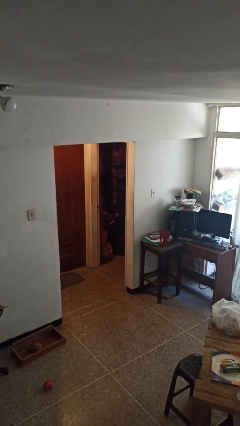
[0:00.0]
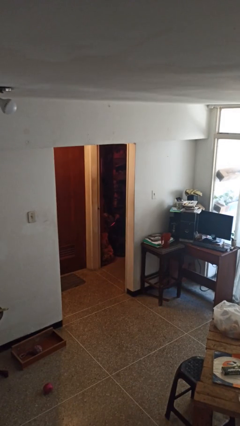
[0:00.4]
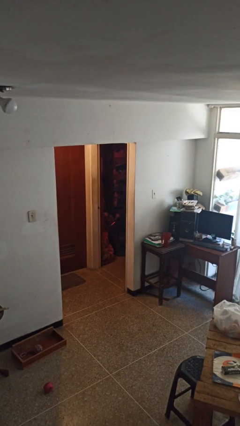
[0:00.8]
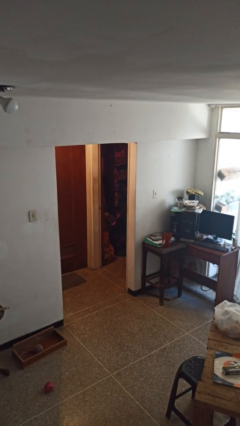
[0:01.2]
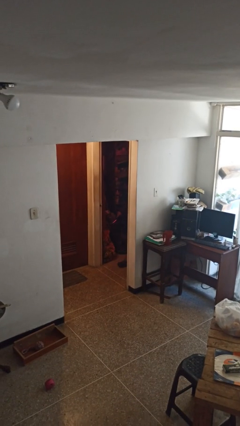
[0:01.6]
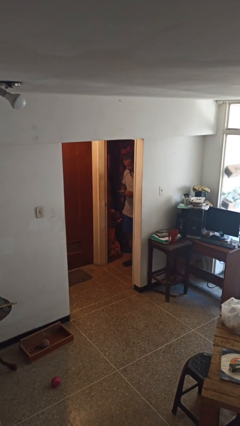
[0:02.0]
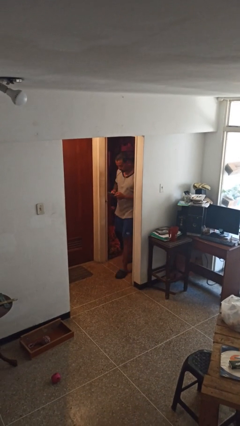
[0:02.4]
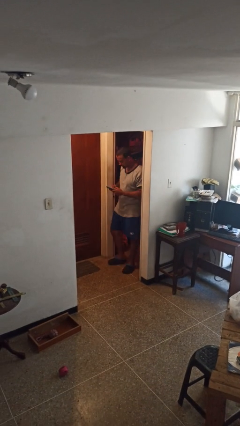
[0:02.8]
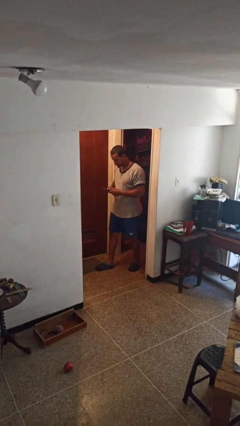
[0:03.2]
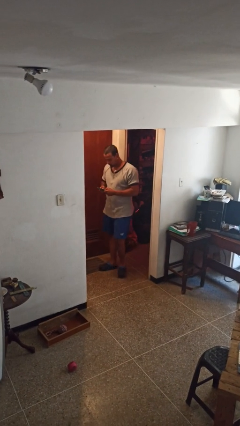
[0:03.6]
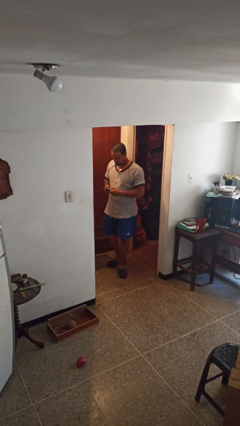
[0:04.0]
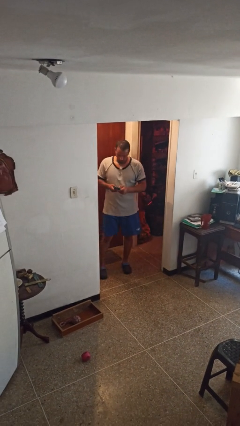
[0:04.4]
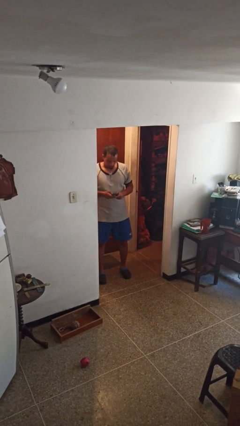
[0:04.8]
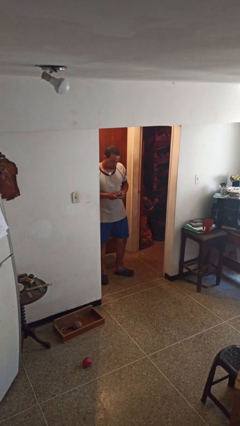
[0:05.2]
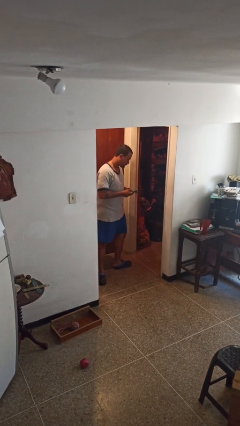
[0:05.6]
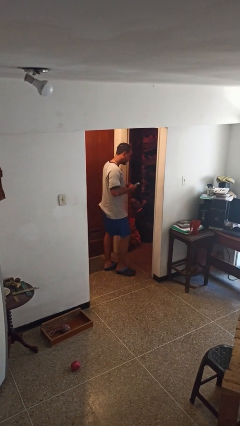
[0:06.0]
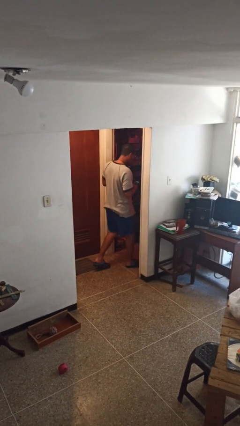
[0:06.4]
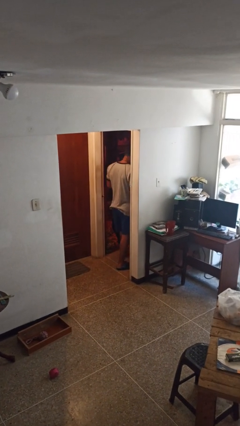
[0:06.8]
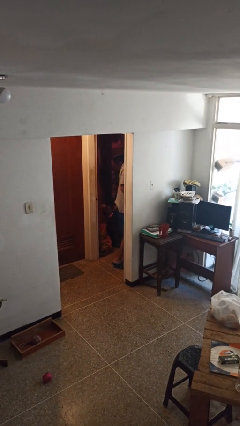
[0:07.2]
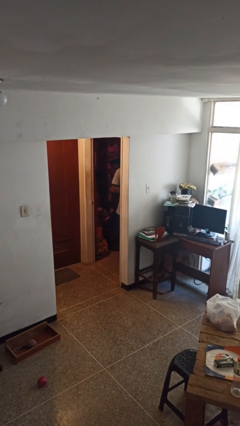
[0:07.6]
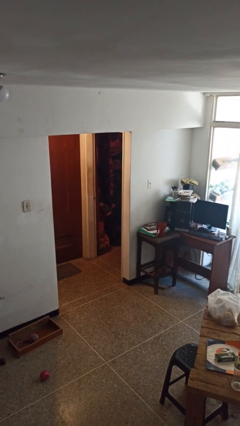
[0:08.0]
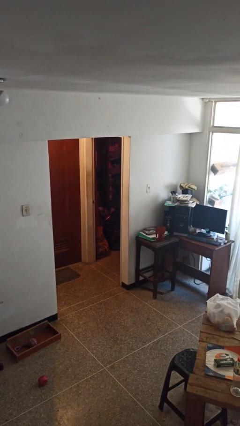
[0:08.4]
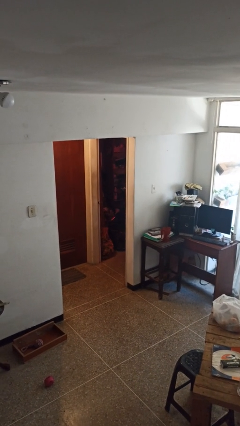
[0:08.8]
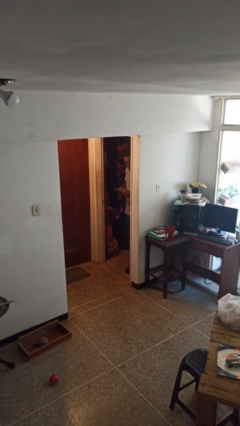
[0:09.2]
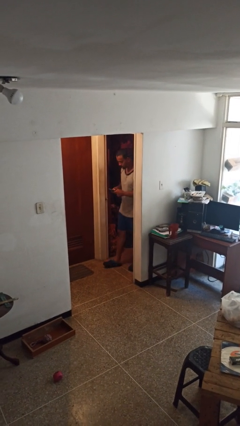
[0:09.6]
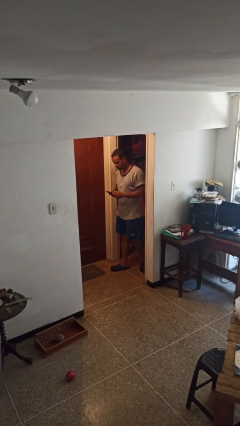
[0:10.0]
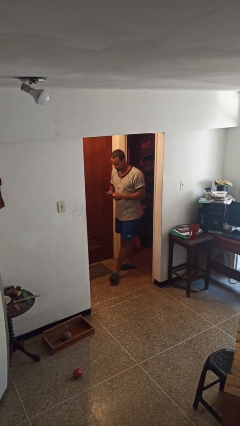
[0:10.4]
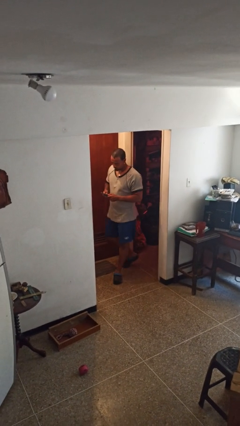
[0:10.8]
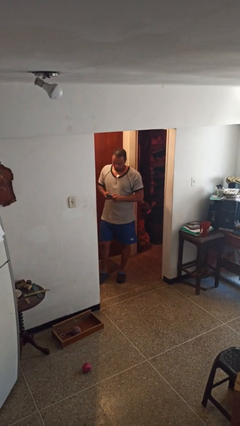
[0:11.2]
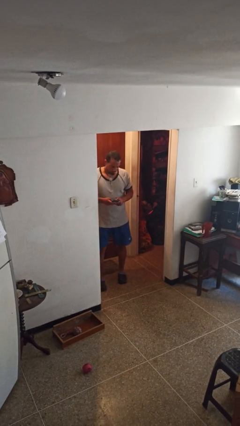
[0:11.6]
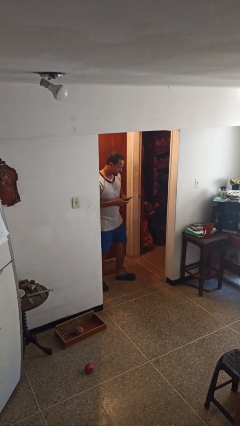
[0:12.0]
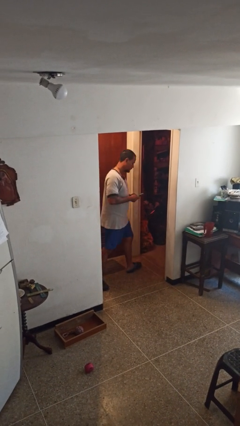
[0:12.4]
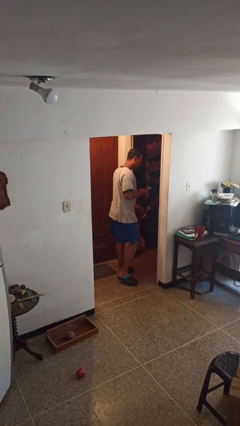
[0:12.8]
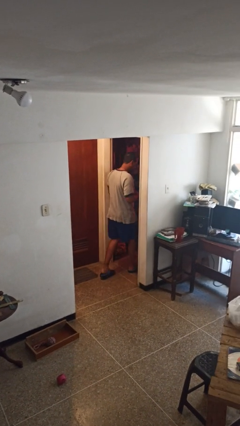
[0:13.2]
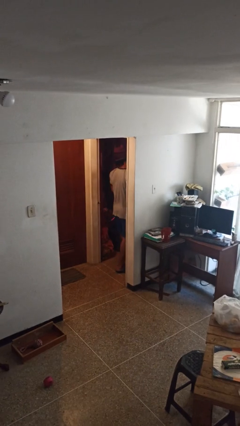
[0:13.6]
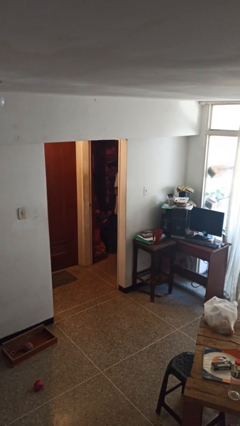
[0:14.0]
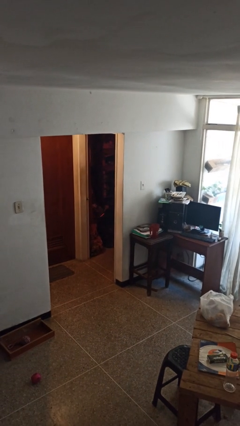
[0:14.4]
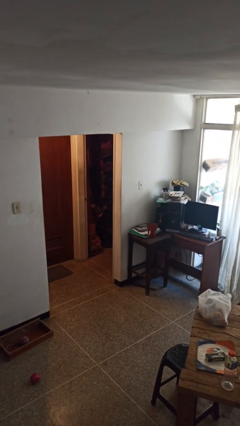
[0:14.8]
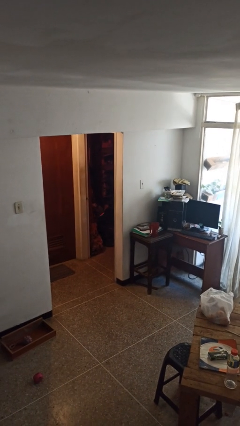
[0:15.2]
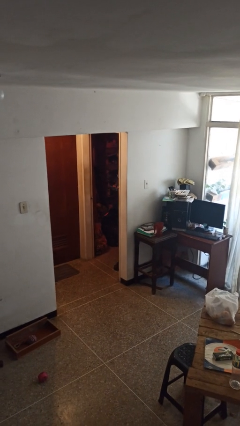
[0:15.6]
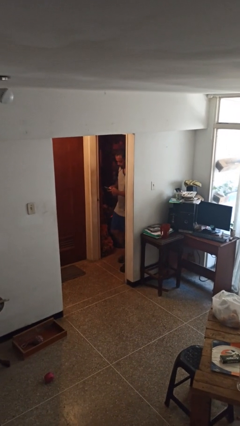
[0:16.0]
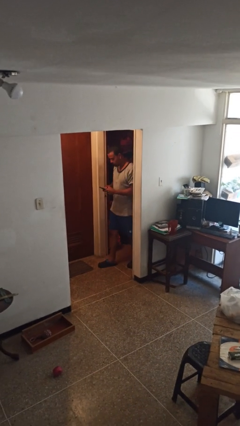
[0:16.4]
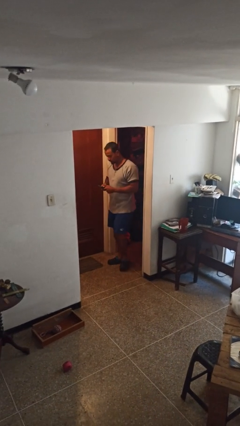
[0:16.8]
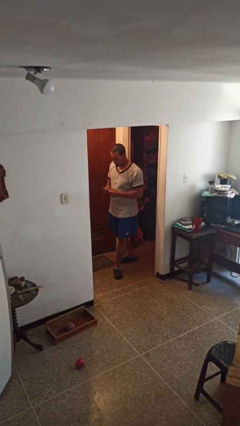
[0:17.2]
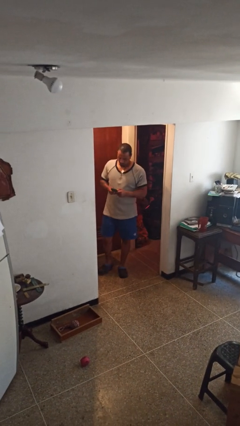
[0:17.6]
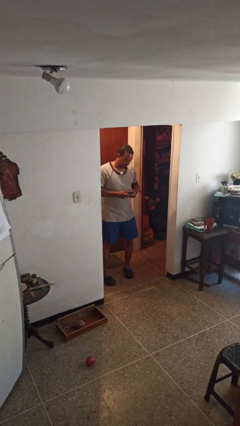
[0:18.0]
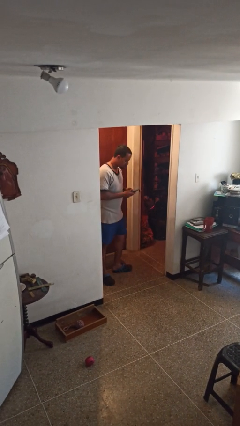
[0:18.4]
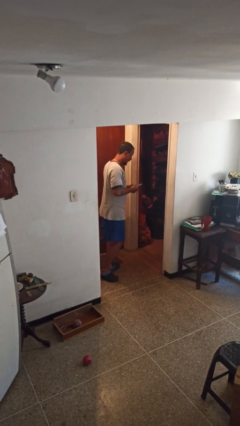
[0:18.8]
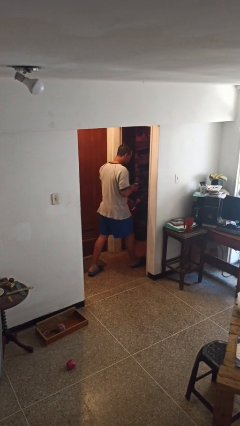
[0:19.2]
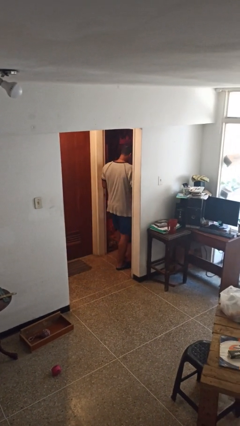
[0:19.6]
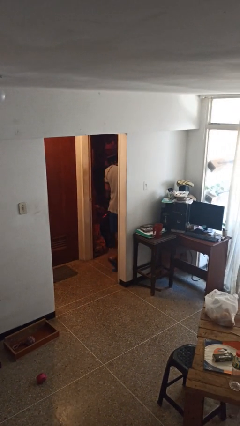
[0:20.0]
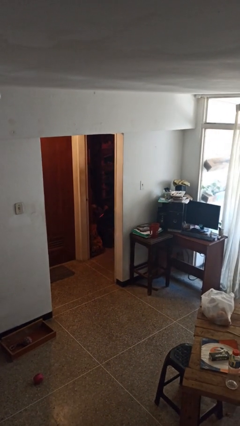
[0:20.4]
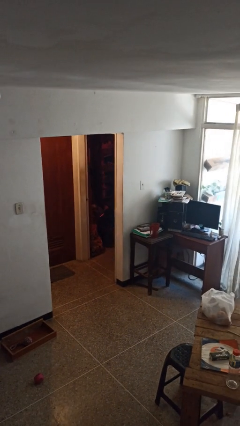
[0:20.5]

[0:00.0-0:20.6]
person texts on phone

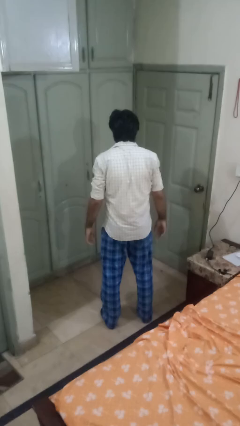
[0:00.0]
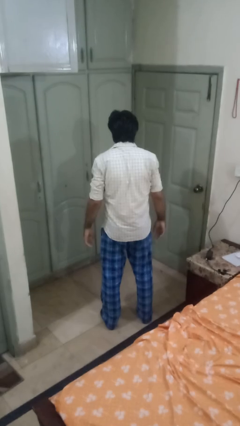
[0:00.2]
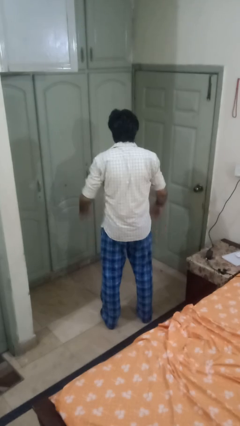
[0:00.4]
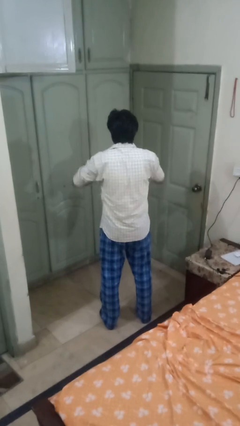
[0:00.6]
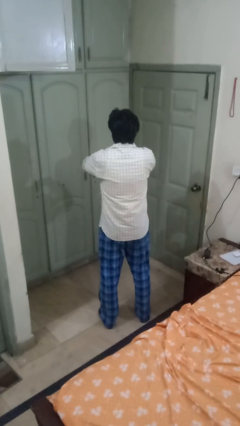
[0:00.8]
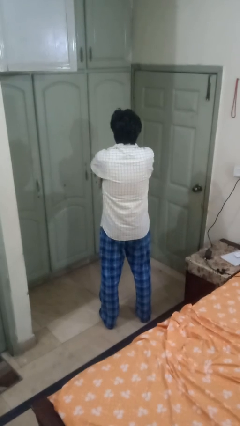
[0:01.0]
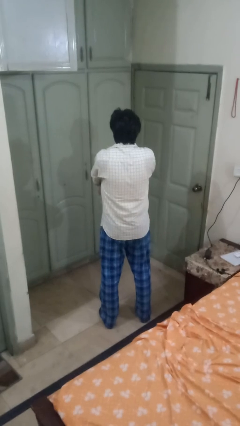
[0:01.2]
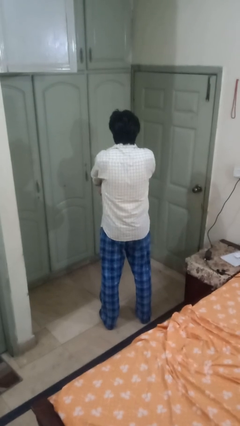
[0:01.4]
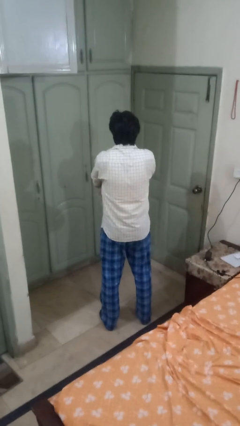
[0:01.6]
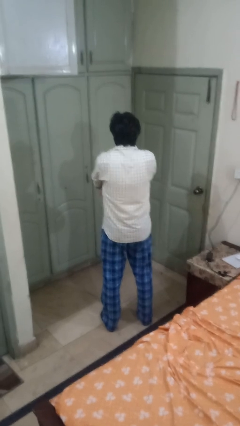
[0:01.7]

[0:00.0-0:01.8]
person crosses arms

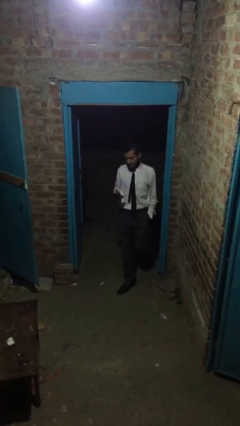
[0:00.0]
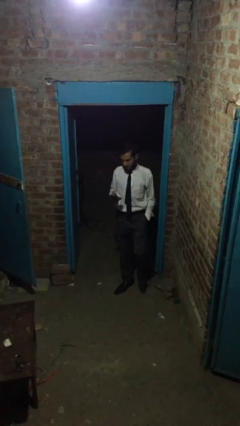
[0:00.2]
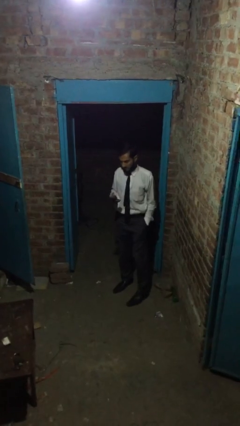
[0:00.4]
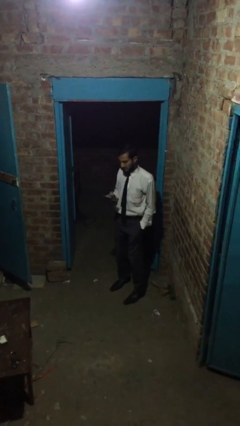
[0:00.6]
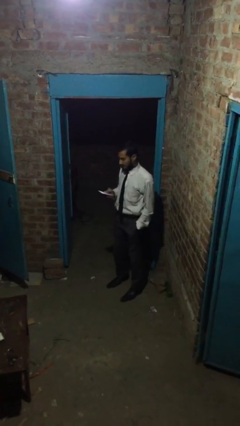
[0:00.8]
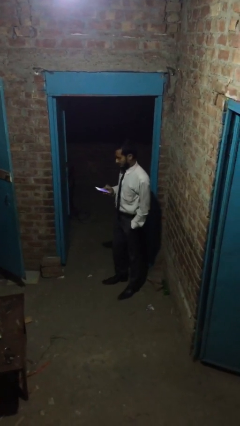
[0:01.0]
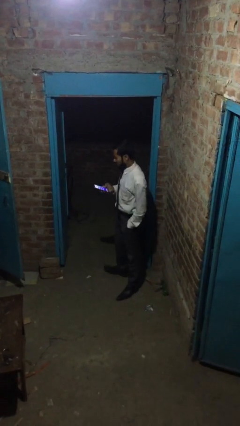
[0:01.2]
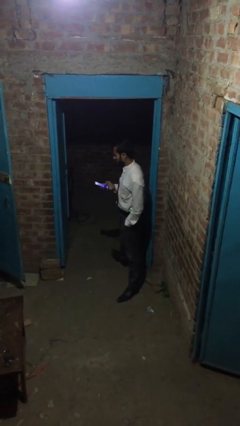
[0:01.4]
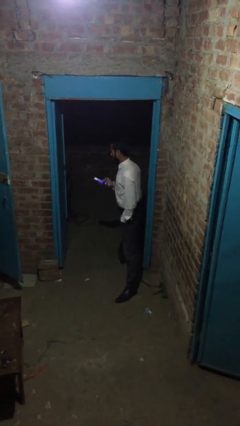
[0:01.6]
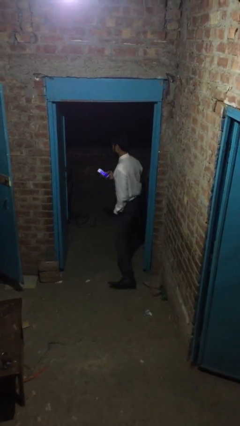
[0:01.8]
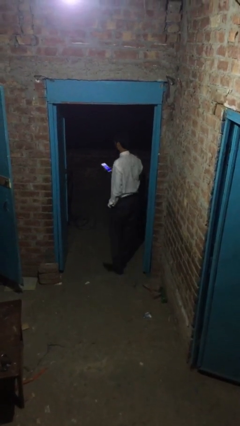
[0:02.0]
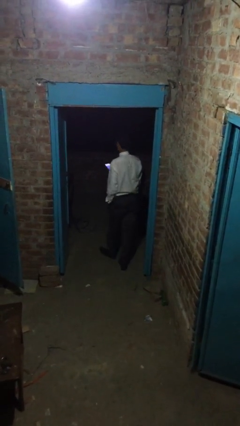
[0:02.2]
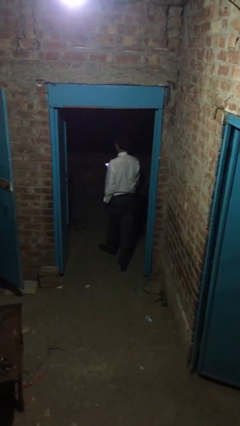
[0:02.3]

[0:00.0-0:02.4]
person exits scene through structure

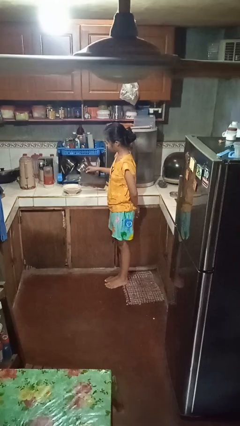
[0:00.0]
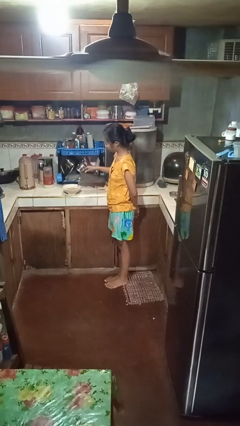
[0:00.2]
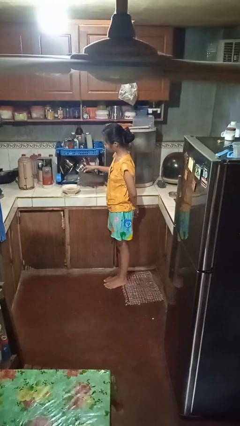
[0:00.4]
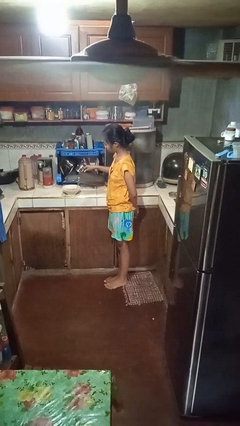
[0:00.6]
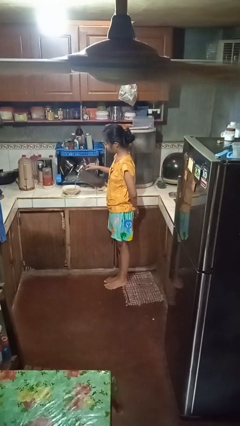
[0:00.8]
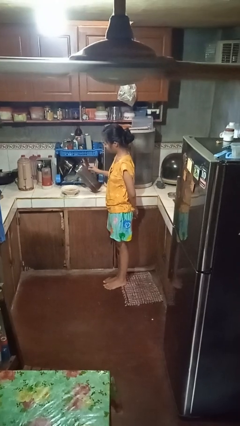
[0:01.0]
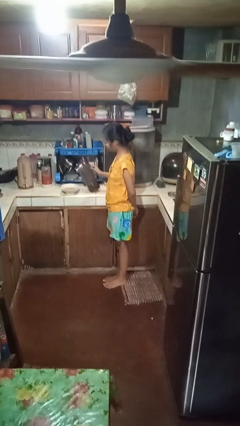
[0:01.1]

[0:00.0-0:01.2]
person pours into bowl

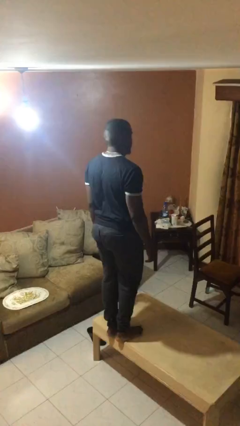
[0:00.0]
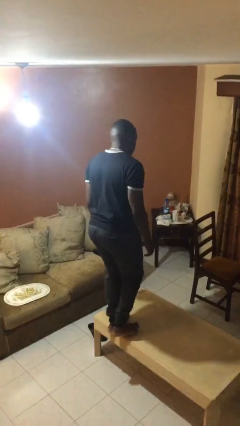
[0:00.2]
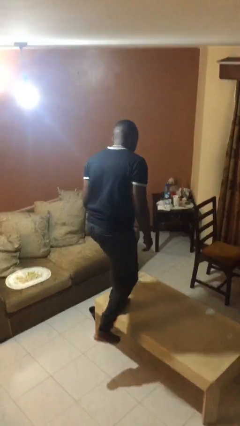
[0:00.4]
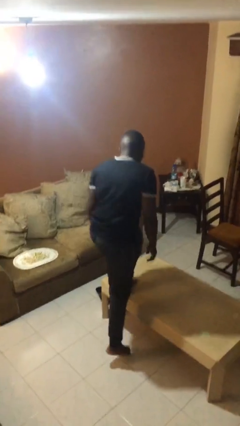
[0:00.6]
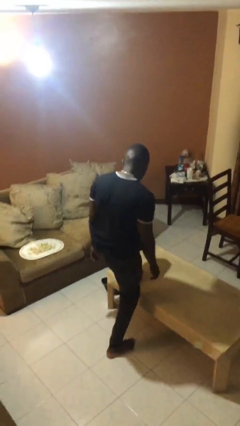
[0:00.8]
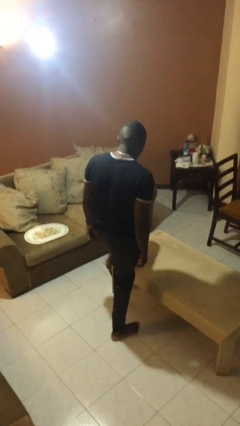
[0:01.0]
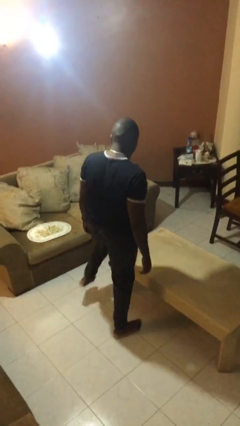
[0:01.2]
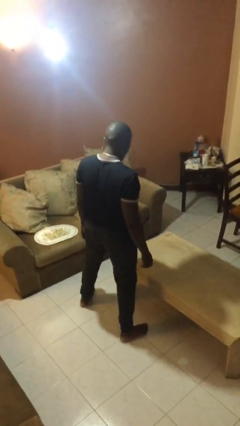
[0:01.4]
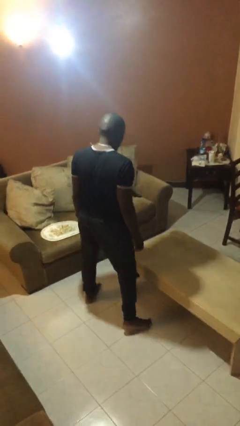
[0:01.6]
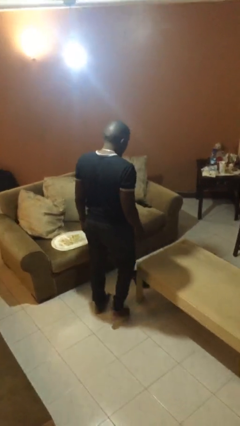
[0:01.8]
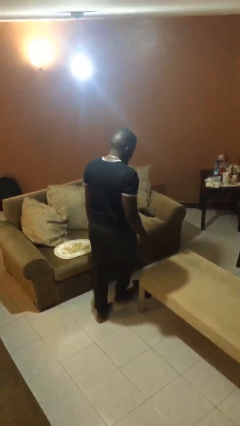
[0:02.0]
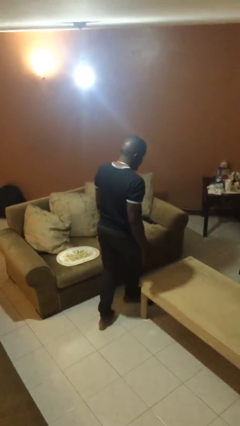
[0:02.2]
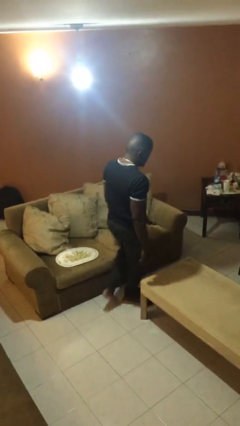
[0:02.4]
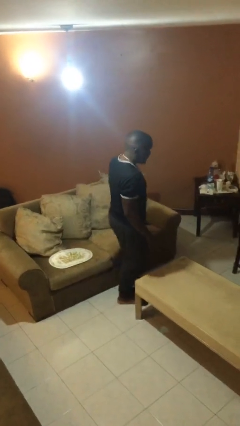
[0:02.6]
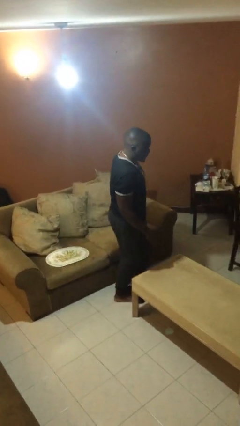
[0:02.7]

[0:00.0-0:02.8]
person climbs off table
